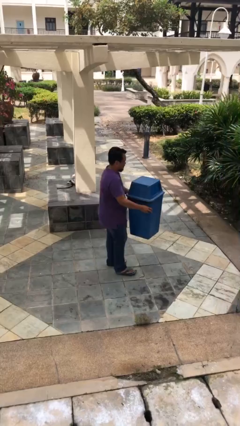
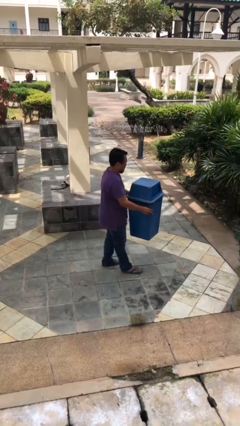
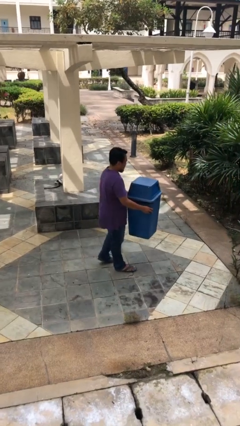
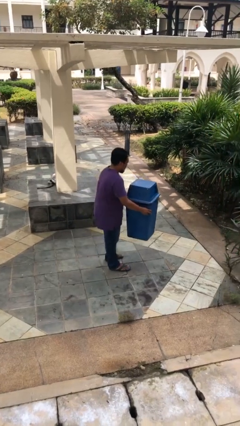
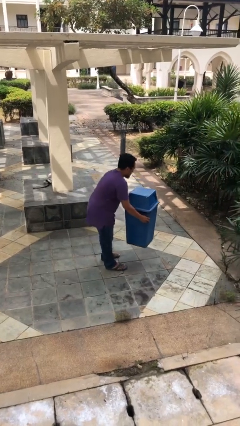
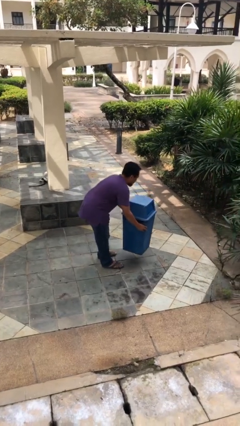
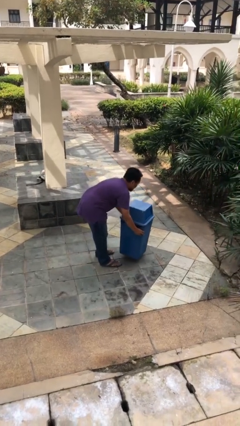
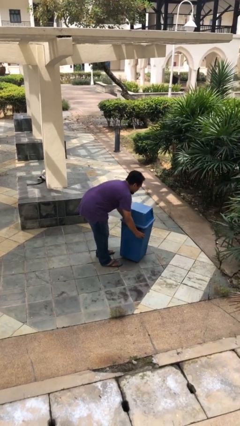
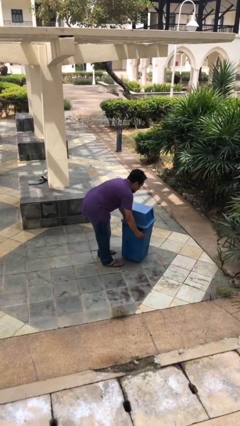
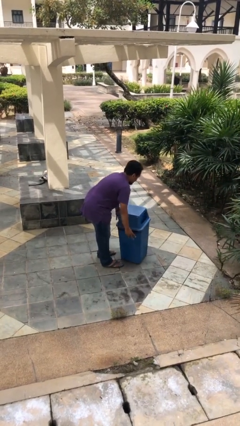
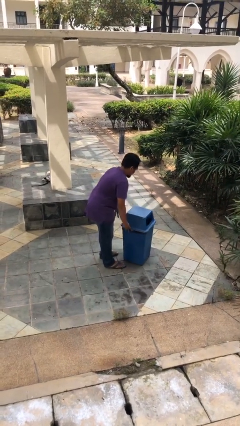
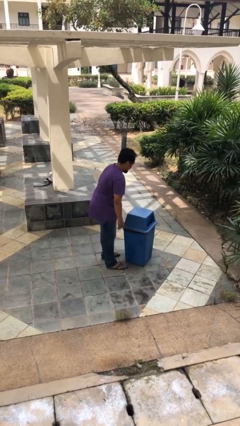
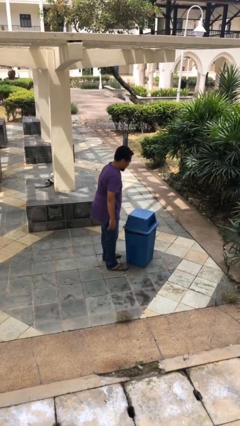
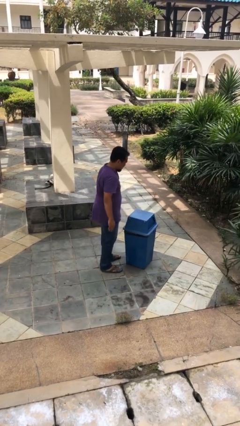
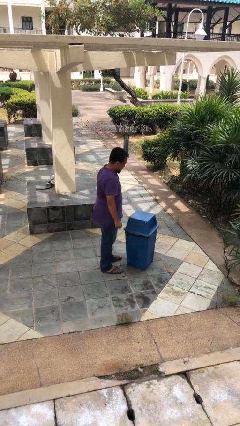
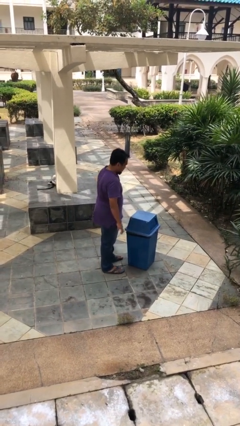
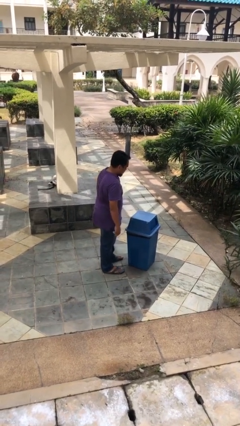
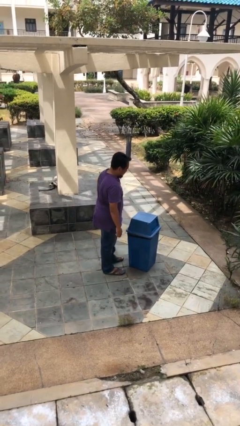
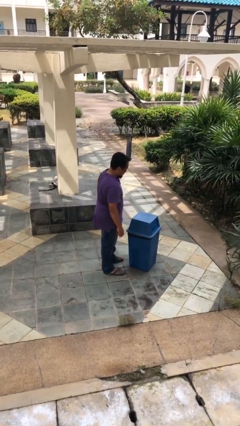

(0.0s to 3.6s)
person puts down object on floor

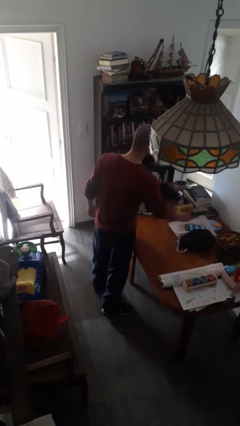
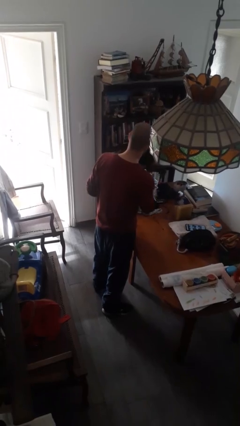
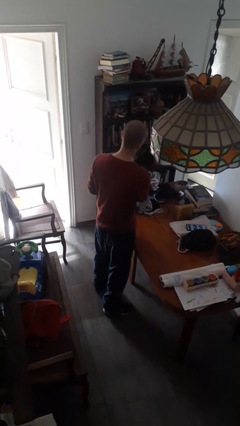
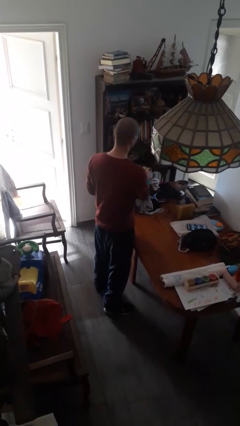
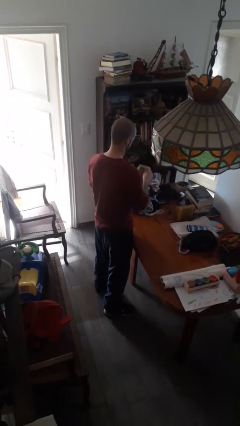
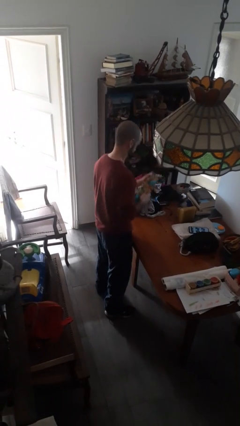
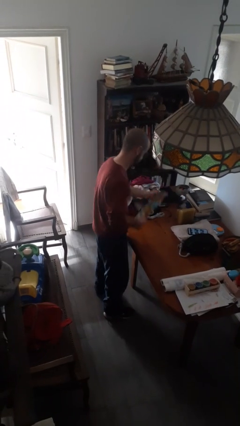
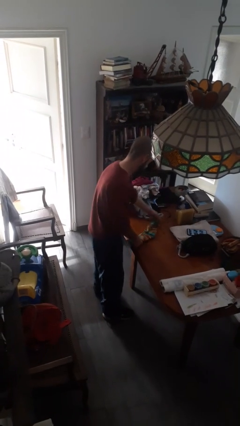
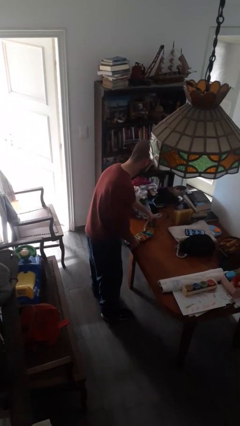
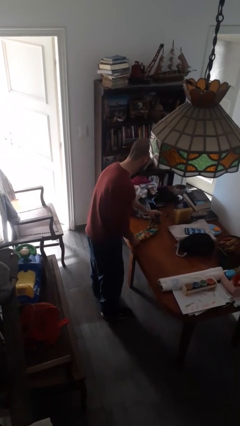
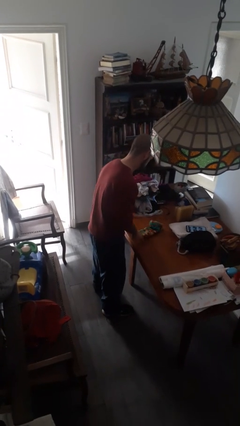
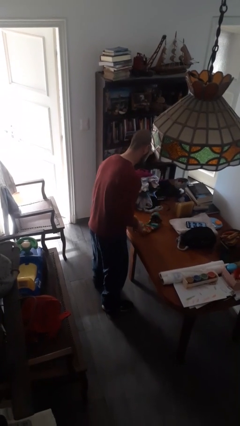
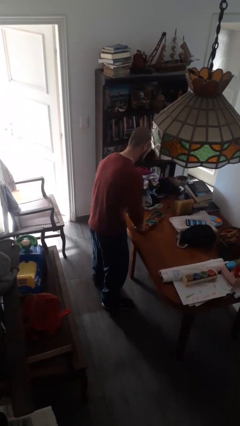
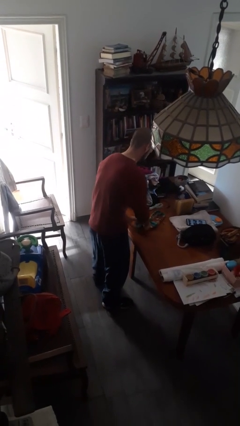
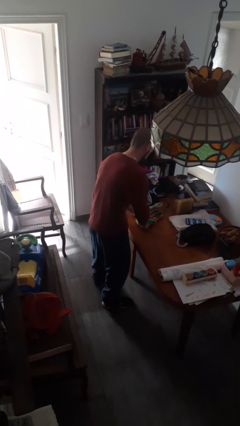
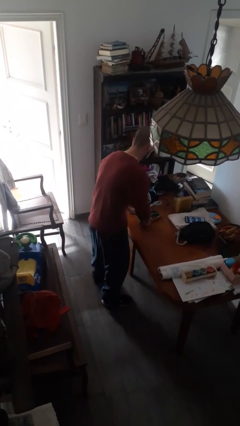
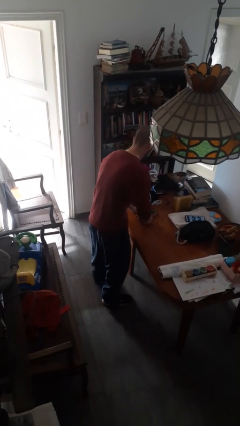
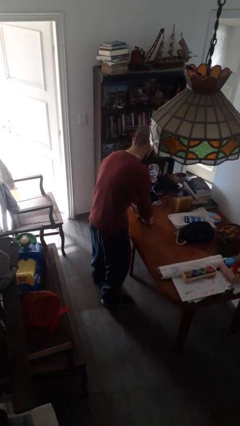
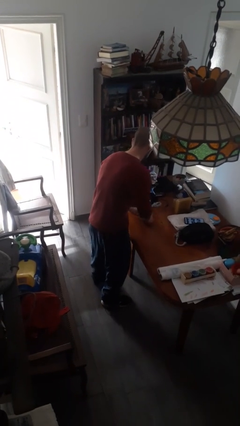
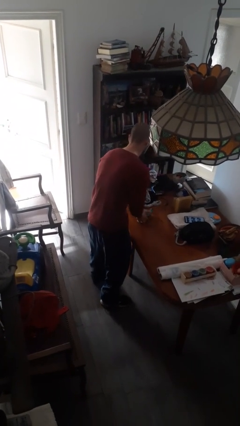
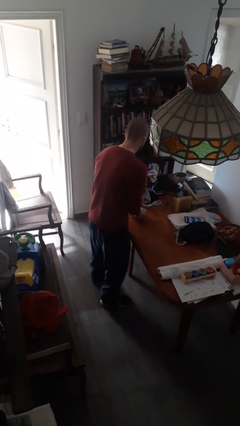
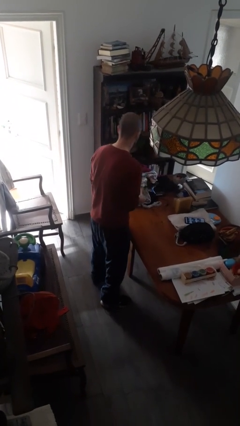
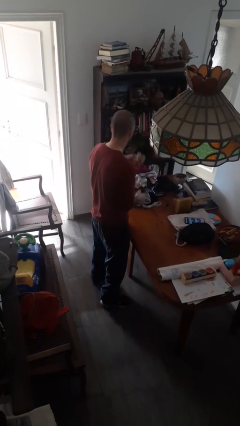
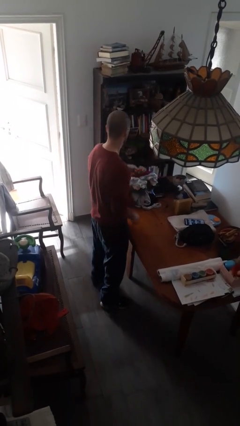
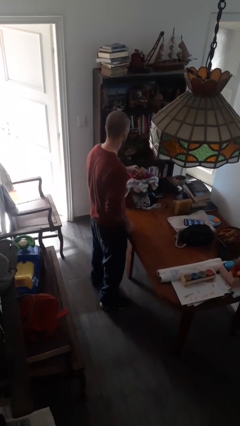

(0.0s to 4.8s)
person folds socks

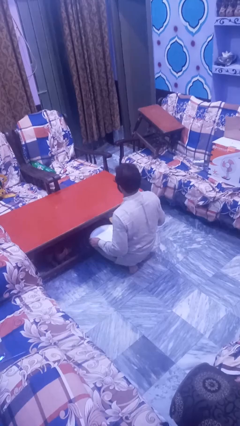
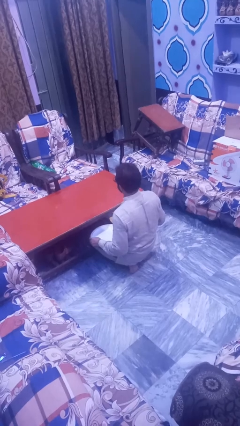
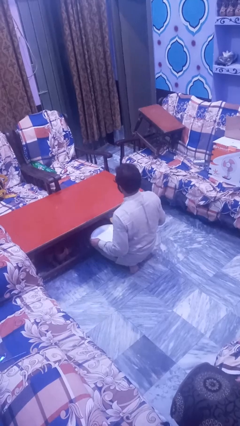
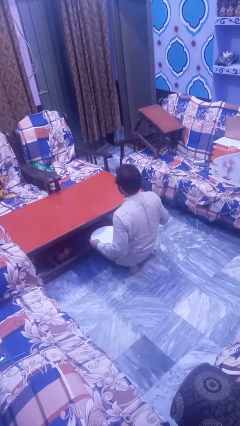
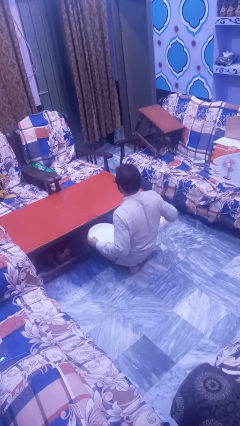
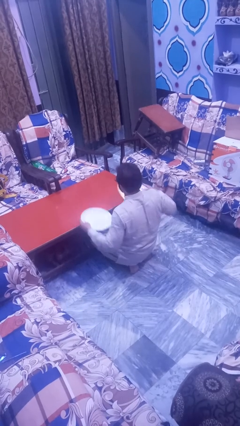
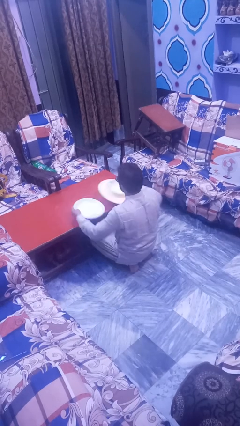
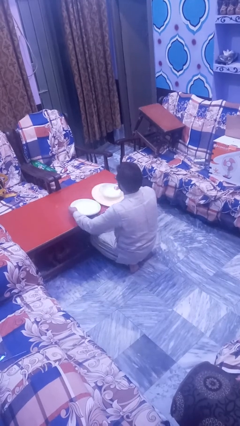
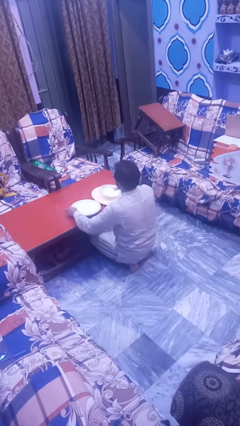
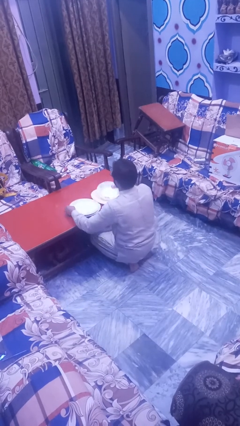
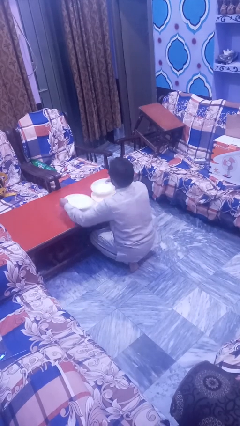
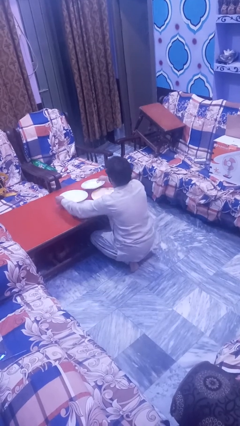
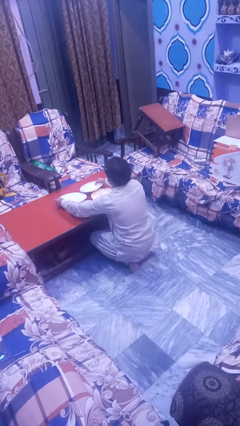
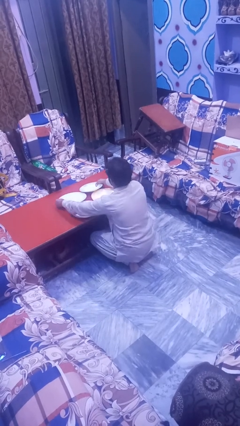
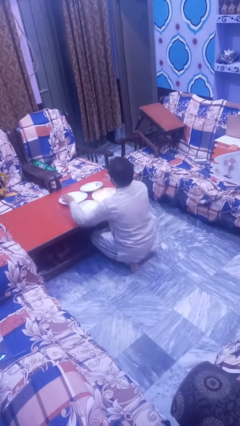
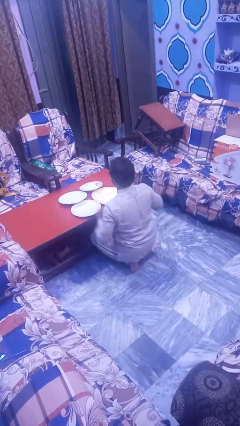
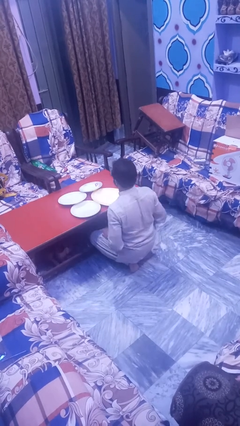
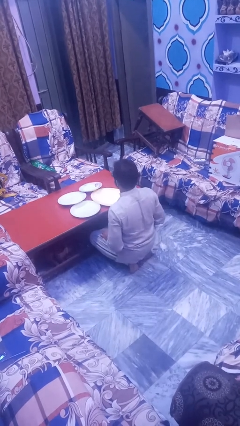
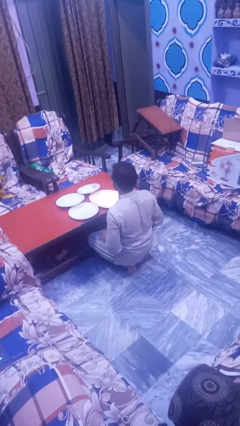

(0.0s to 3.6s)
person sets table

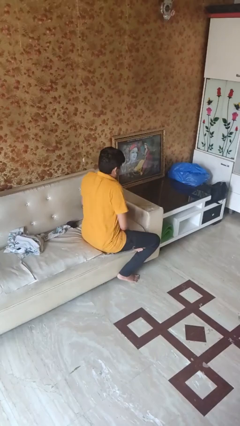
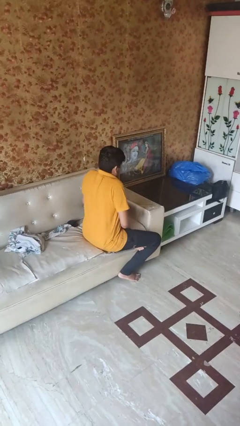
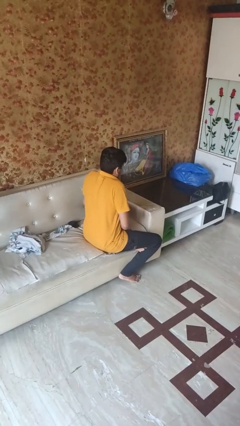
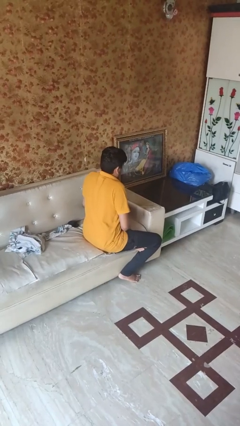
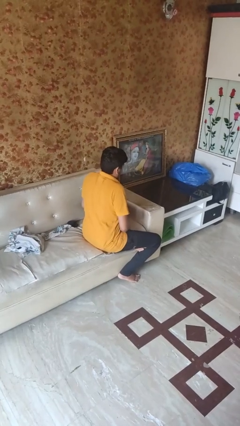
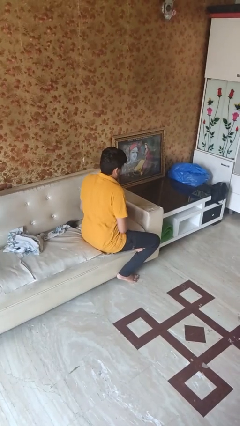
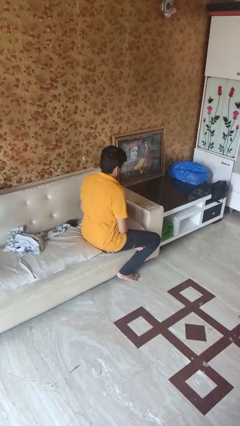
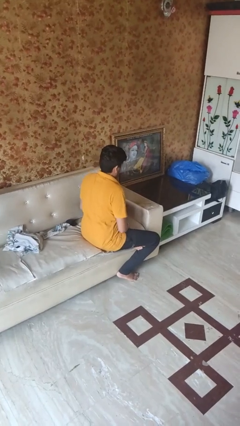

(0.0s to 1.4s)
person shrugs

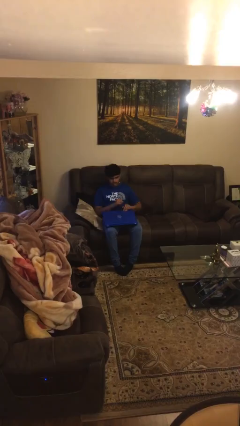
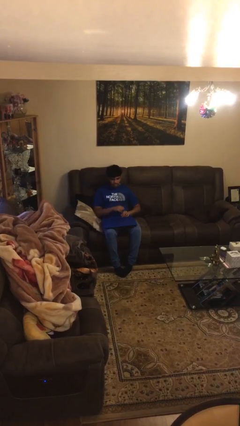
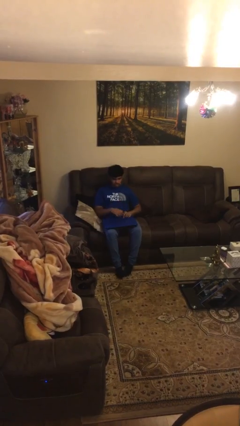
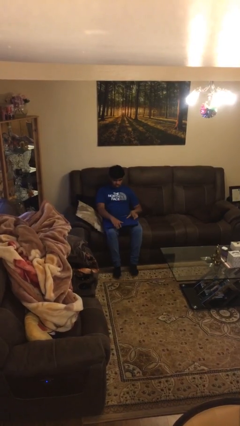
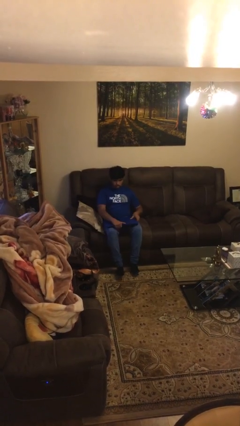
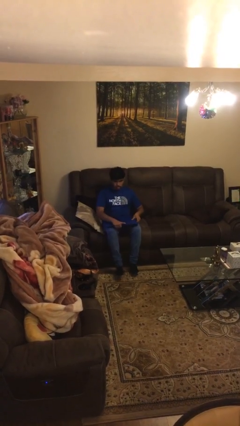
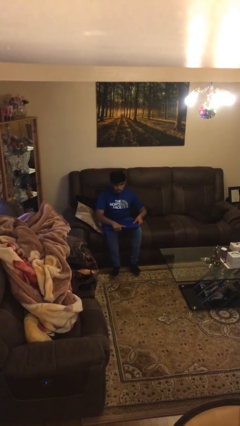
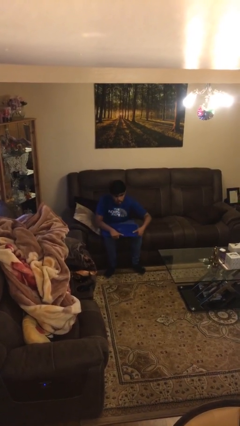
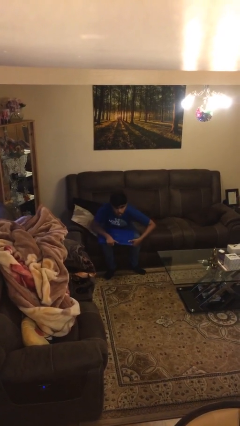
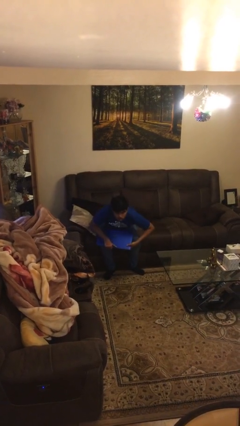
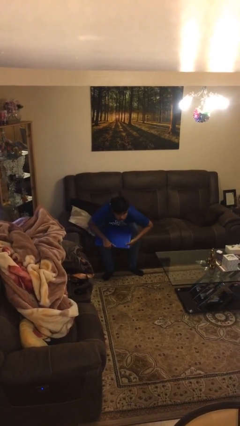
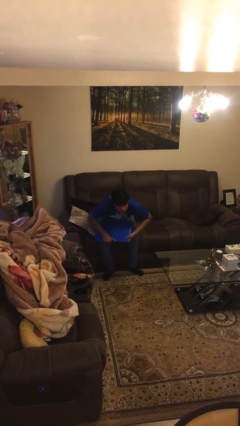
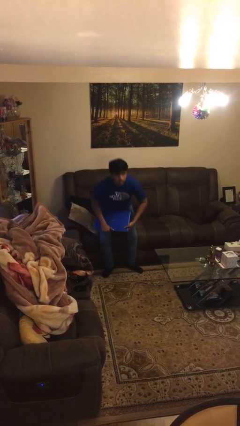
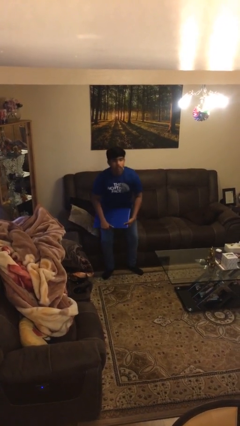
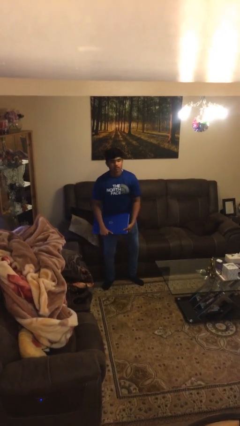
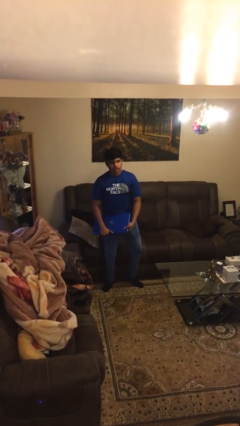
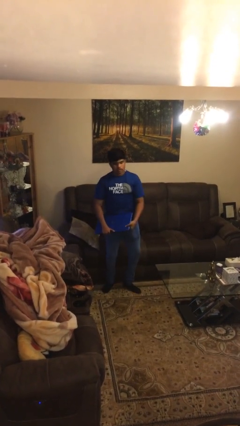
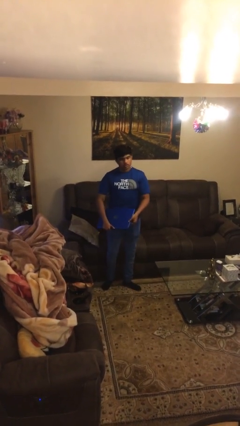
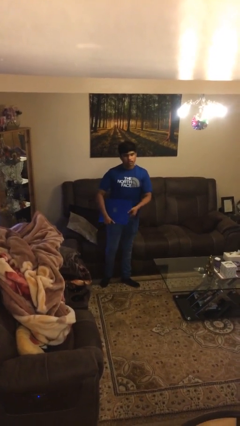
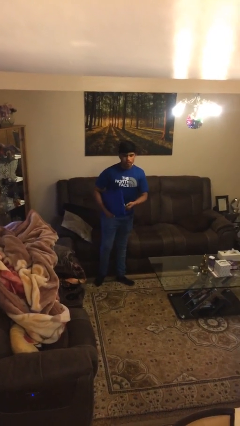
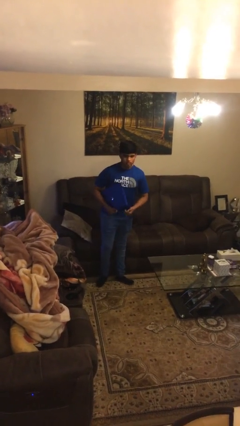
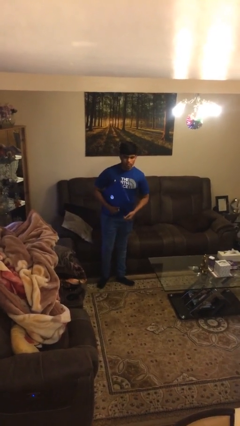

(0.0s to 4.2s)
person stands up
